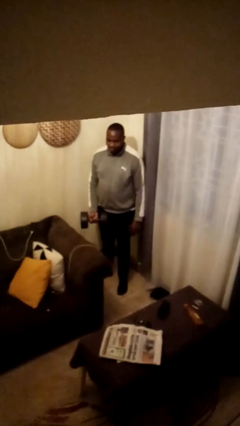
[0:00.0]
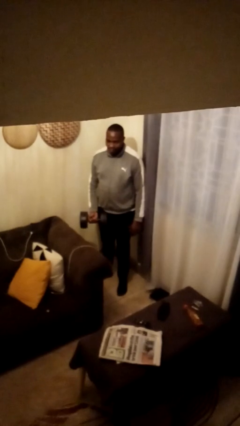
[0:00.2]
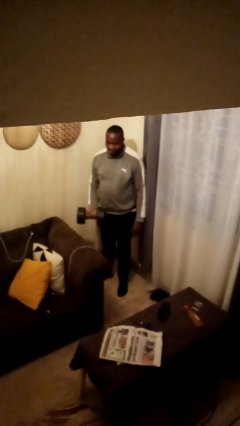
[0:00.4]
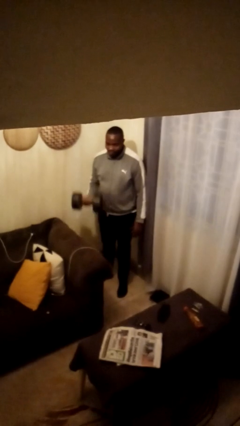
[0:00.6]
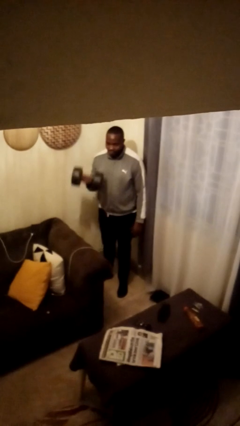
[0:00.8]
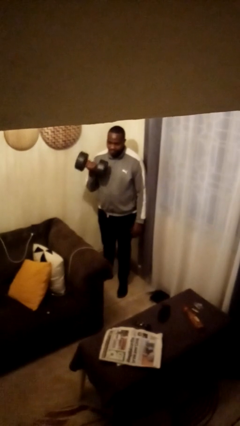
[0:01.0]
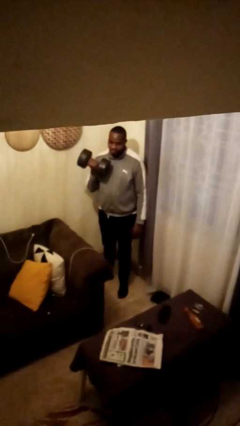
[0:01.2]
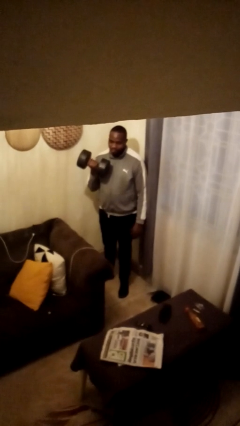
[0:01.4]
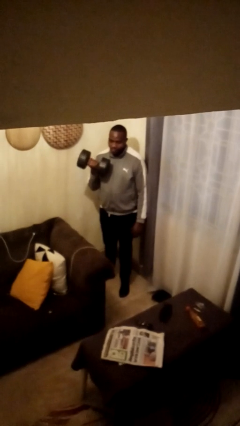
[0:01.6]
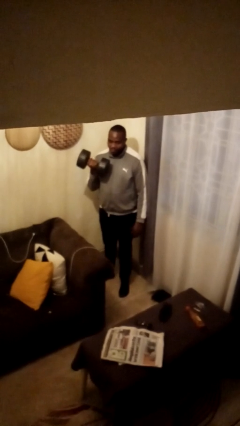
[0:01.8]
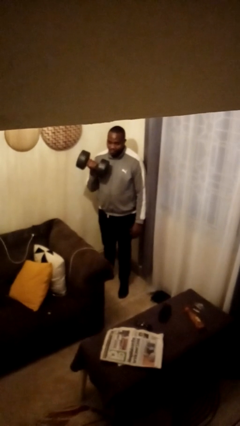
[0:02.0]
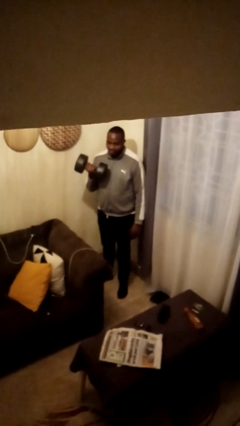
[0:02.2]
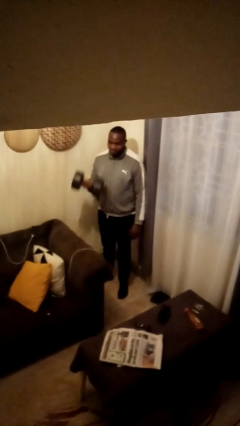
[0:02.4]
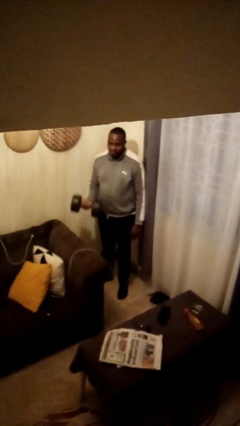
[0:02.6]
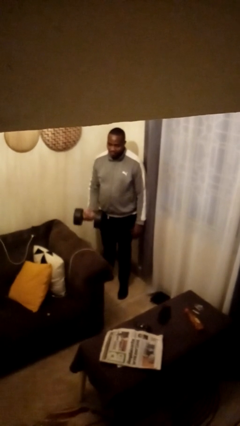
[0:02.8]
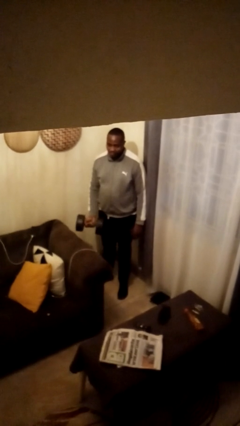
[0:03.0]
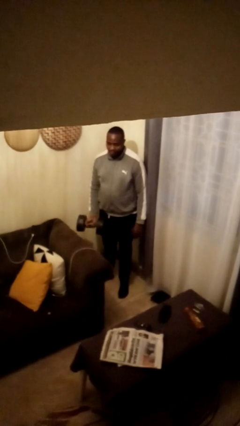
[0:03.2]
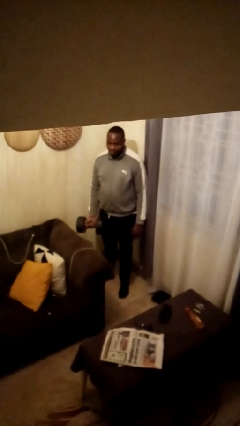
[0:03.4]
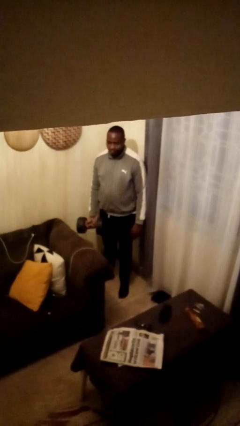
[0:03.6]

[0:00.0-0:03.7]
person lifts dumbbells

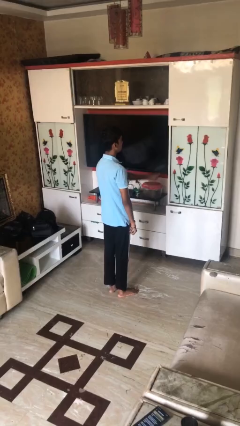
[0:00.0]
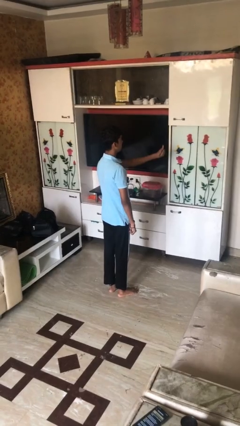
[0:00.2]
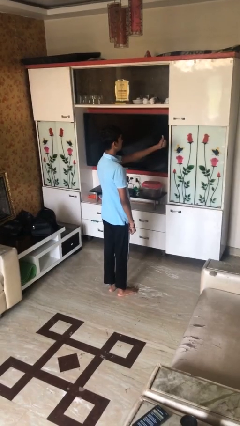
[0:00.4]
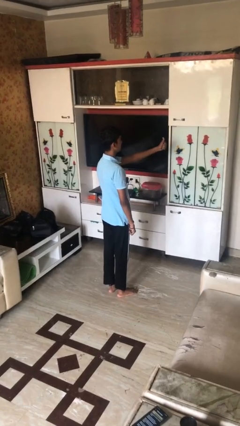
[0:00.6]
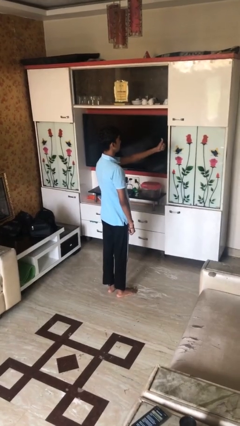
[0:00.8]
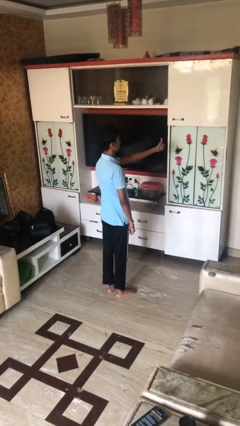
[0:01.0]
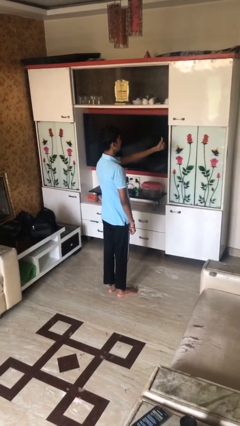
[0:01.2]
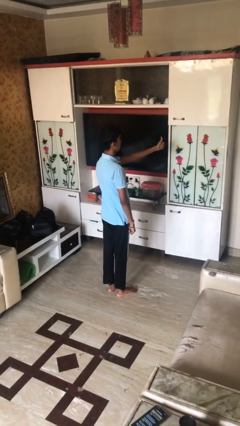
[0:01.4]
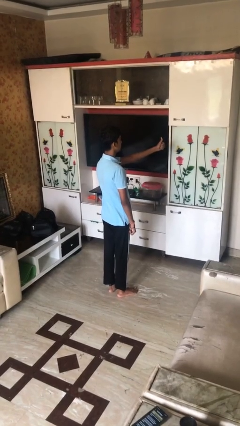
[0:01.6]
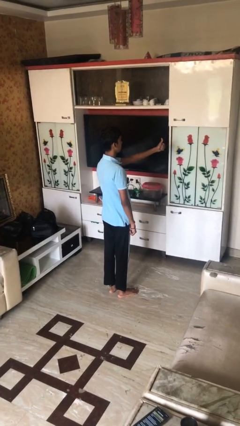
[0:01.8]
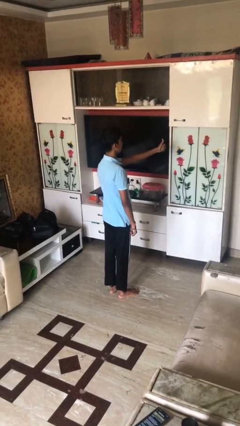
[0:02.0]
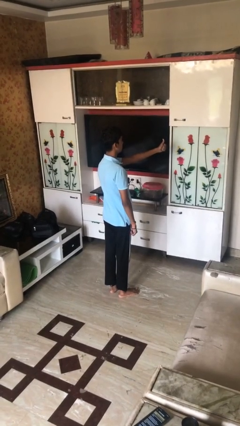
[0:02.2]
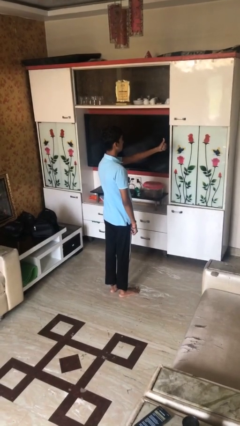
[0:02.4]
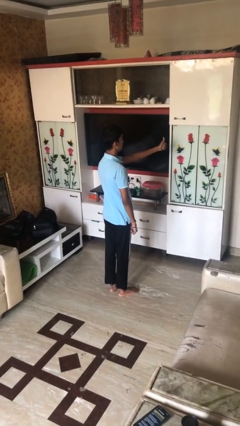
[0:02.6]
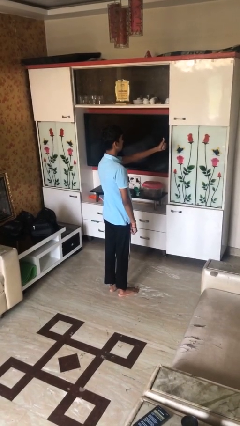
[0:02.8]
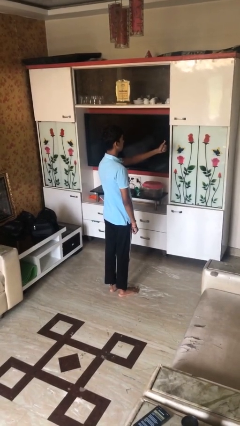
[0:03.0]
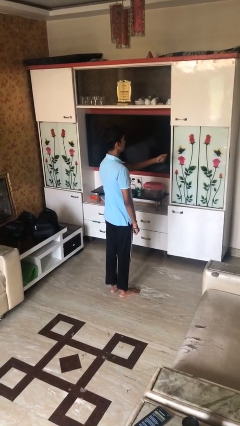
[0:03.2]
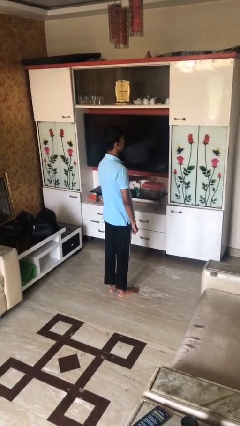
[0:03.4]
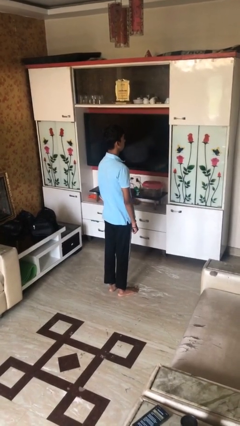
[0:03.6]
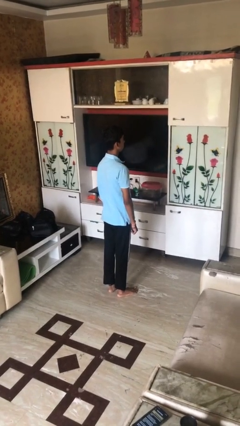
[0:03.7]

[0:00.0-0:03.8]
person gestures thumbs up

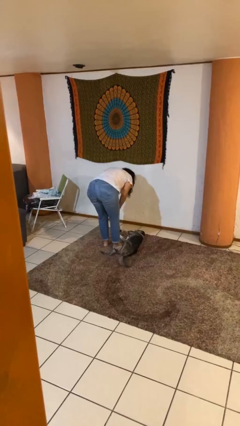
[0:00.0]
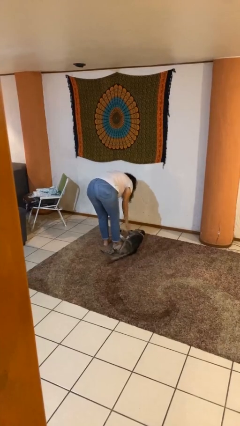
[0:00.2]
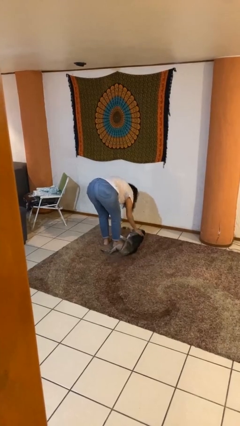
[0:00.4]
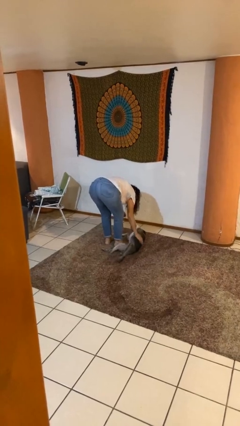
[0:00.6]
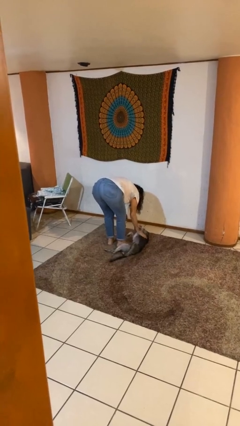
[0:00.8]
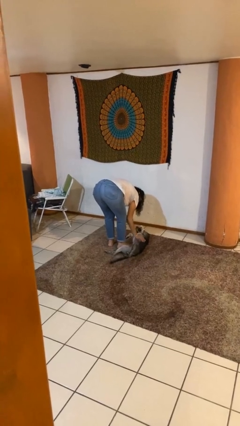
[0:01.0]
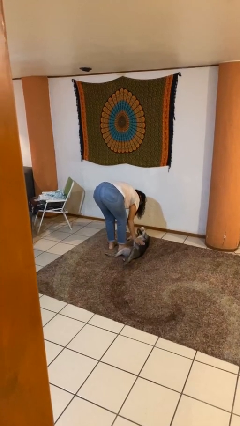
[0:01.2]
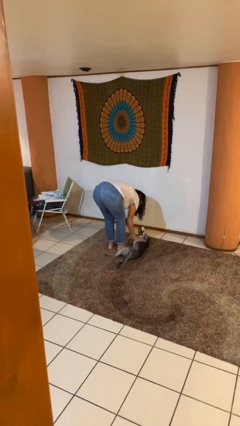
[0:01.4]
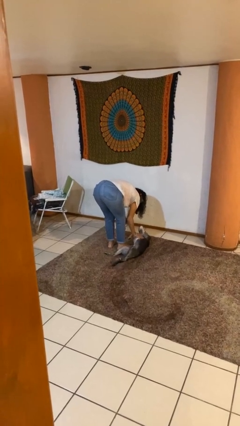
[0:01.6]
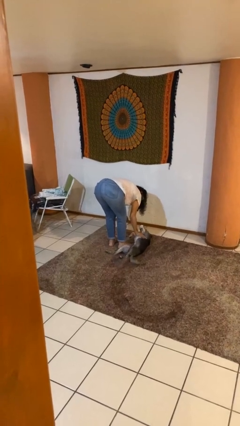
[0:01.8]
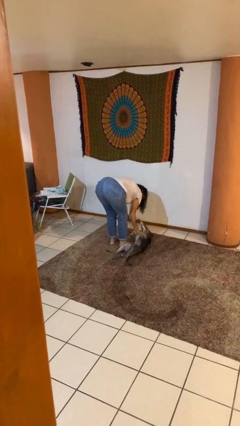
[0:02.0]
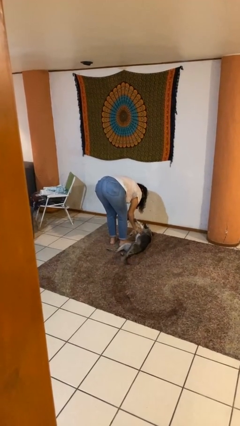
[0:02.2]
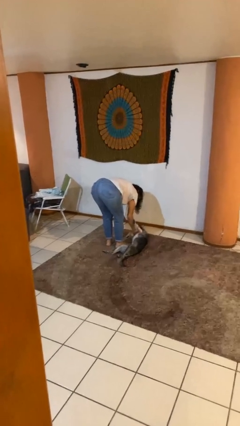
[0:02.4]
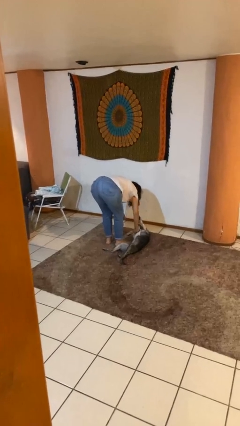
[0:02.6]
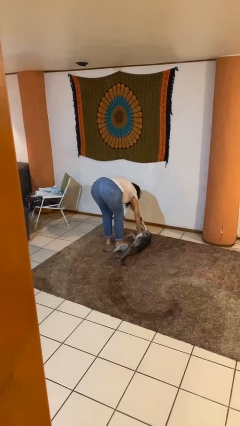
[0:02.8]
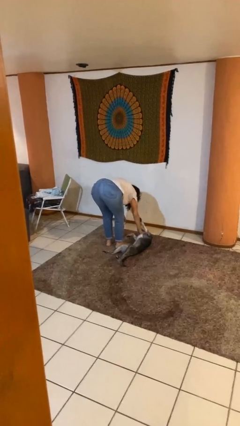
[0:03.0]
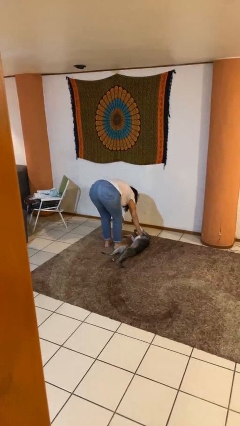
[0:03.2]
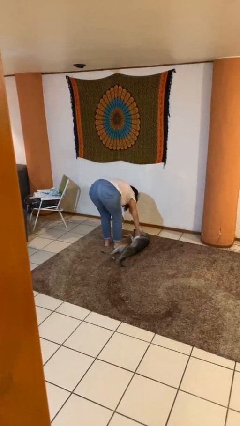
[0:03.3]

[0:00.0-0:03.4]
person pets dog

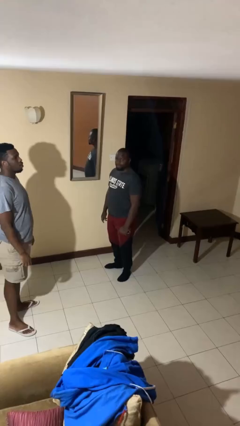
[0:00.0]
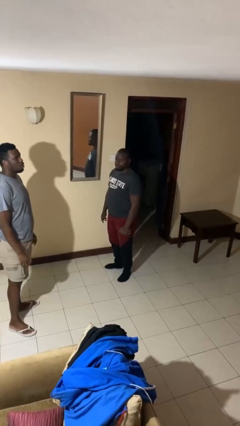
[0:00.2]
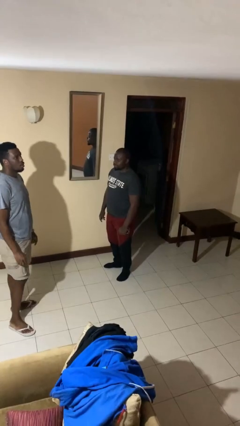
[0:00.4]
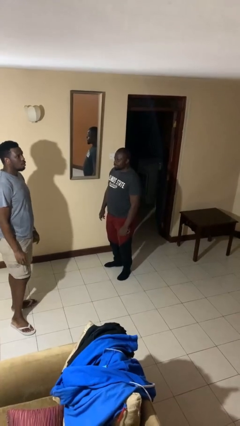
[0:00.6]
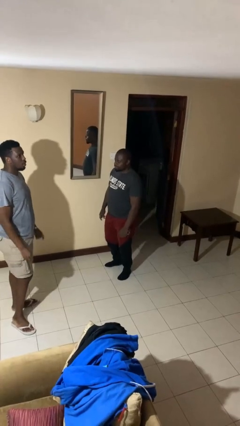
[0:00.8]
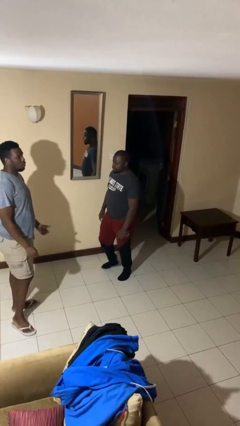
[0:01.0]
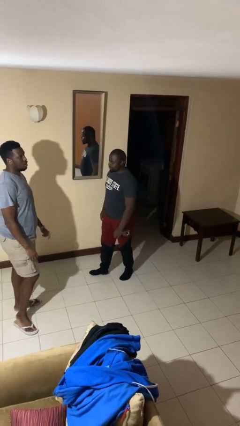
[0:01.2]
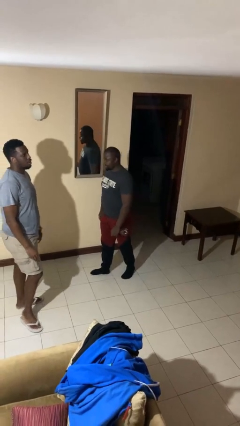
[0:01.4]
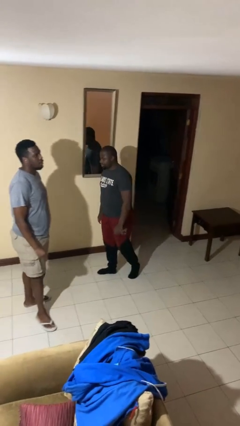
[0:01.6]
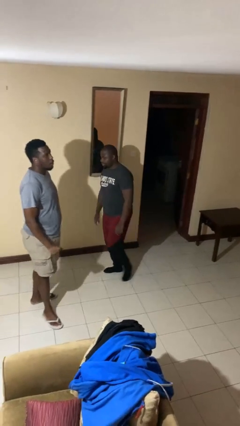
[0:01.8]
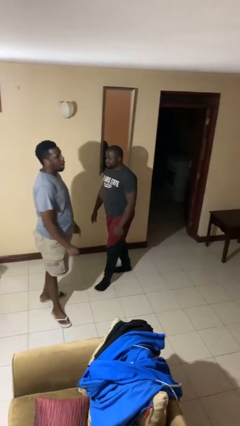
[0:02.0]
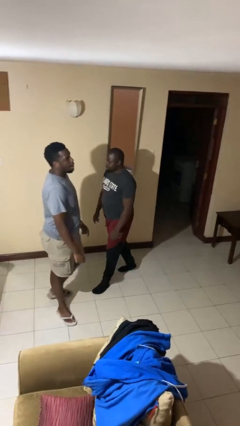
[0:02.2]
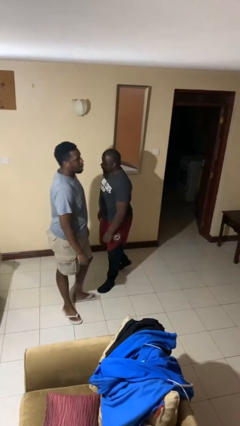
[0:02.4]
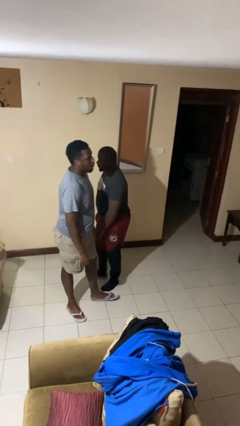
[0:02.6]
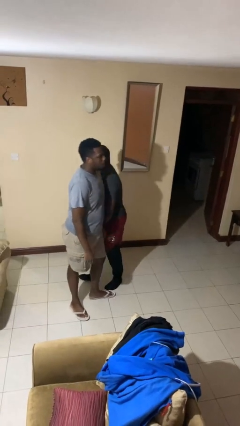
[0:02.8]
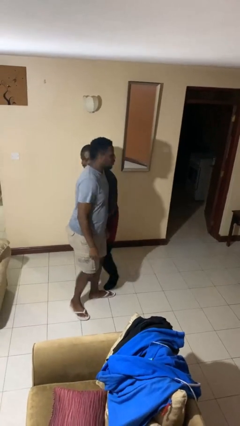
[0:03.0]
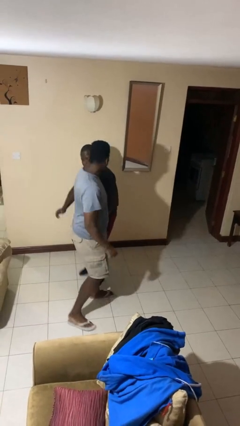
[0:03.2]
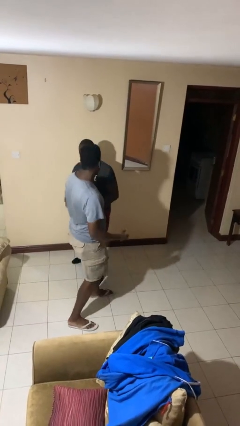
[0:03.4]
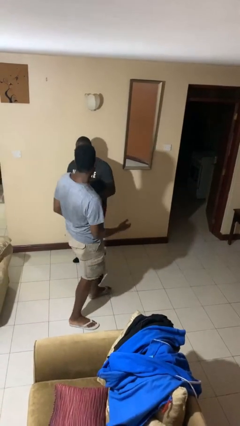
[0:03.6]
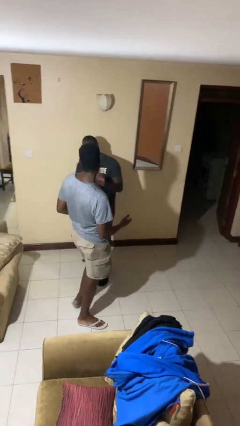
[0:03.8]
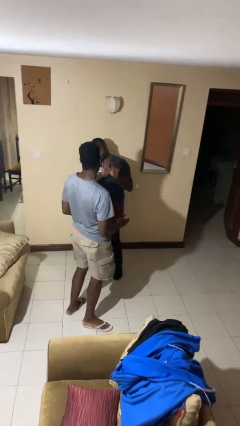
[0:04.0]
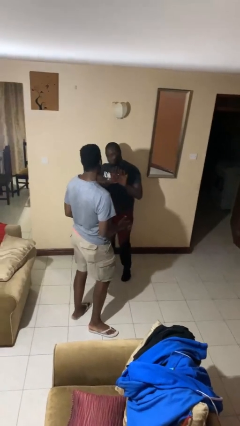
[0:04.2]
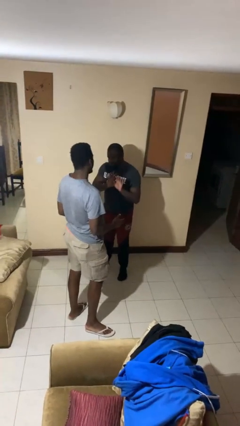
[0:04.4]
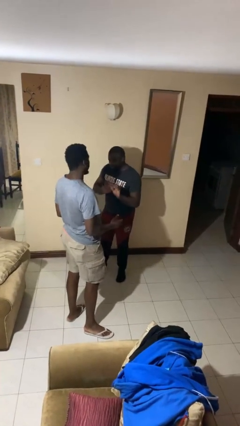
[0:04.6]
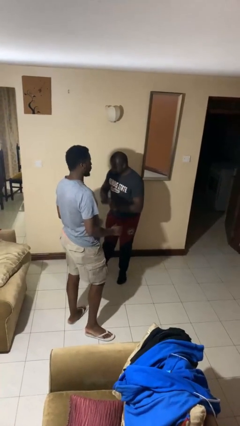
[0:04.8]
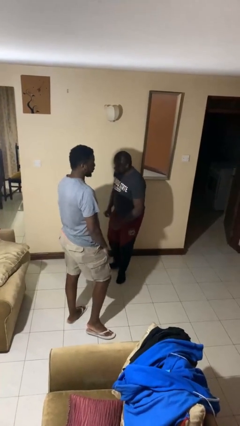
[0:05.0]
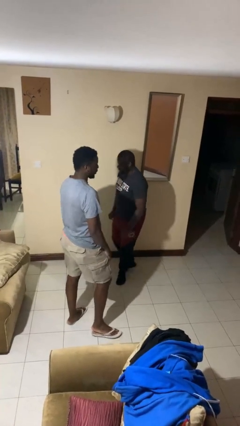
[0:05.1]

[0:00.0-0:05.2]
person bumps into person

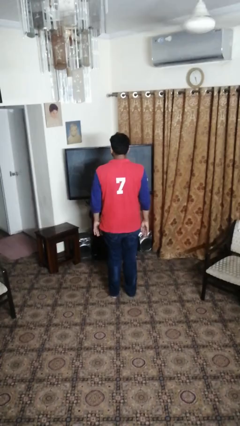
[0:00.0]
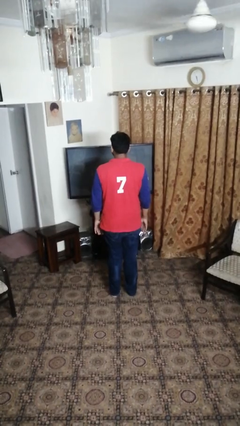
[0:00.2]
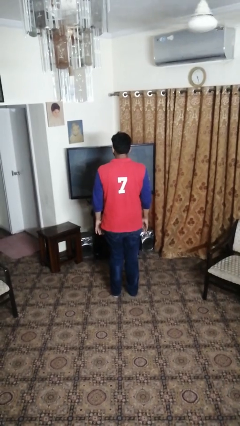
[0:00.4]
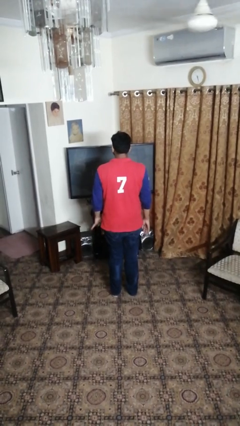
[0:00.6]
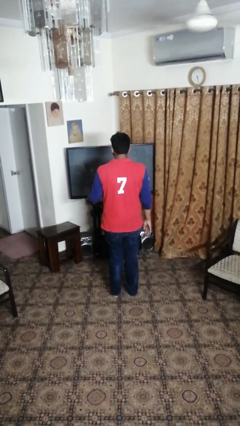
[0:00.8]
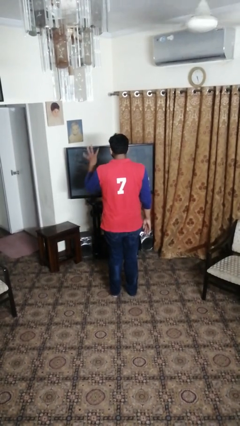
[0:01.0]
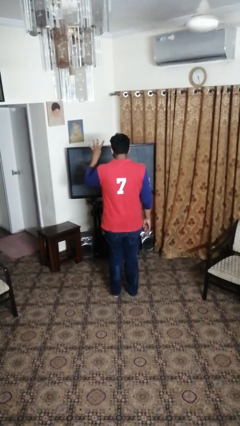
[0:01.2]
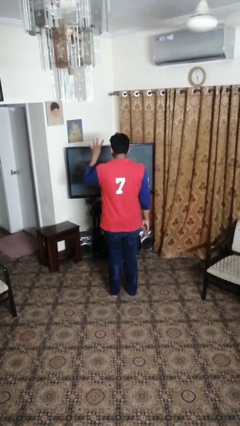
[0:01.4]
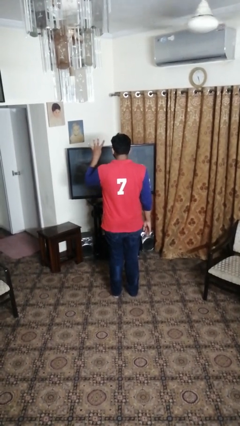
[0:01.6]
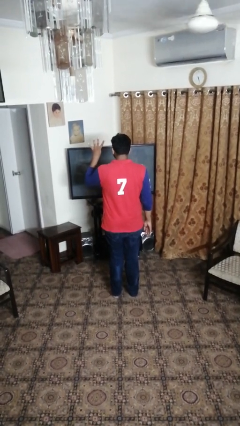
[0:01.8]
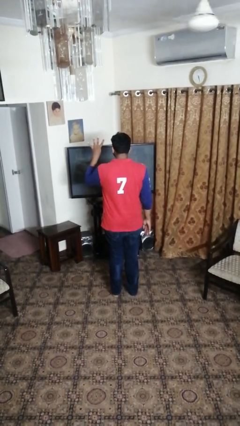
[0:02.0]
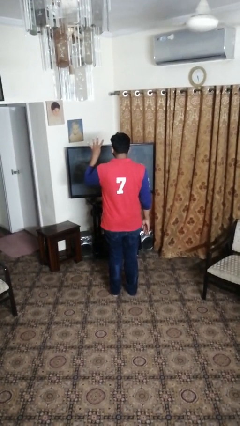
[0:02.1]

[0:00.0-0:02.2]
person gestures number four
